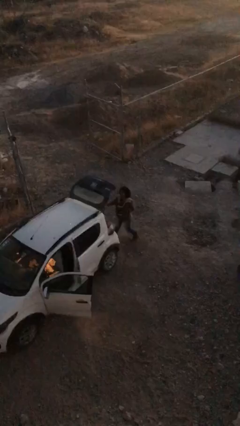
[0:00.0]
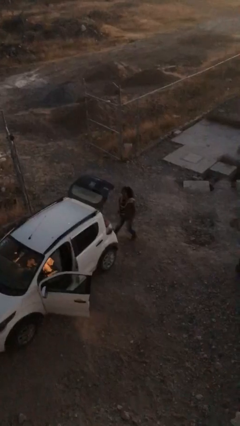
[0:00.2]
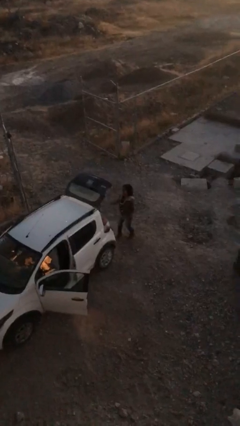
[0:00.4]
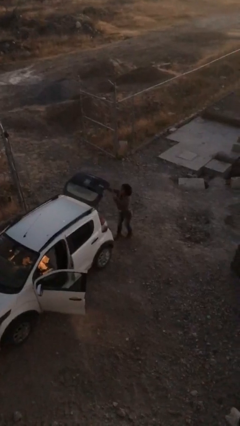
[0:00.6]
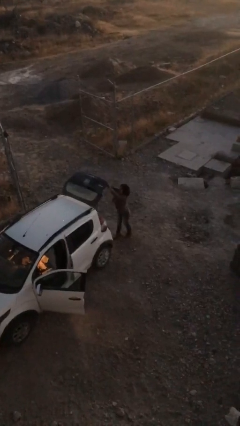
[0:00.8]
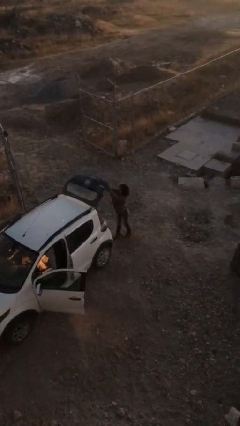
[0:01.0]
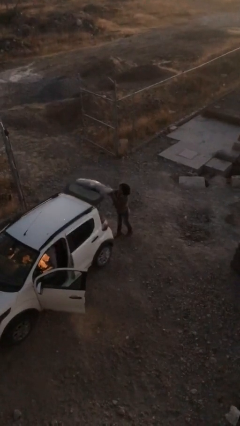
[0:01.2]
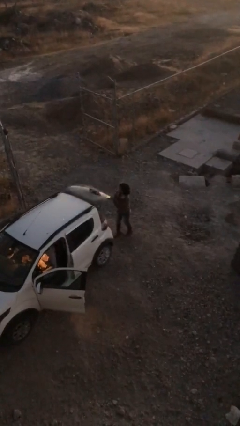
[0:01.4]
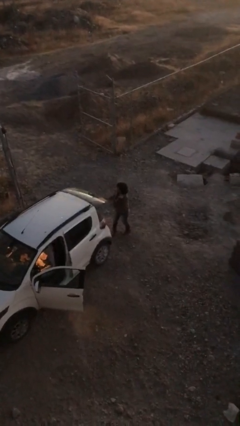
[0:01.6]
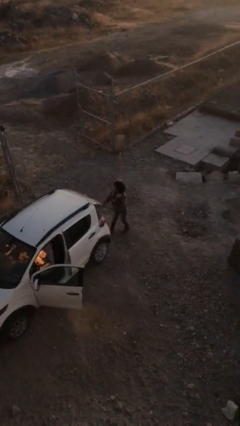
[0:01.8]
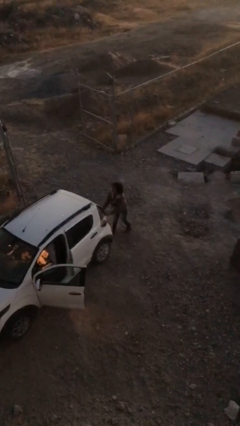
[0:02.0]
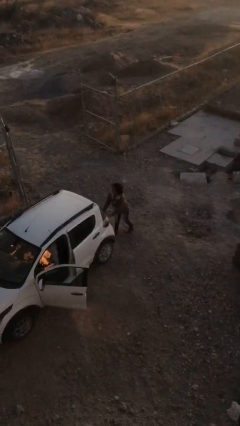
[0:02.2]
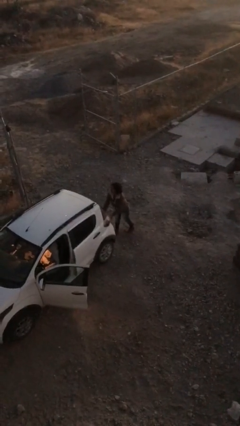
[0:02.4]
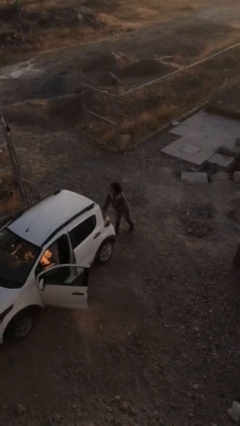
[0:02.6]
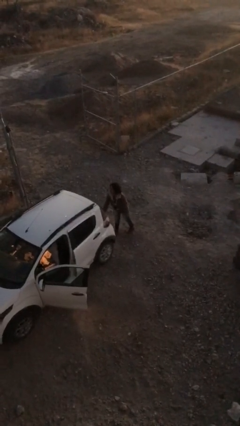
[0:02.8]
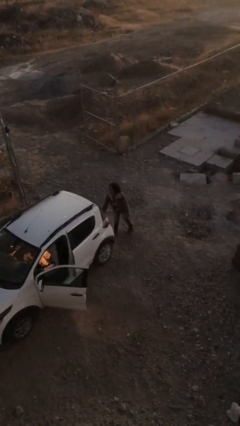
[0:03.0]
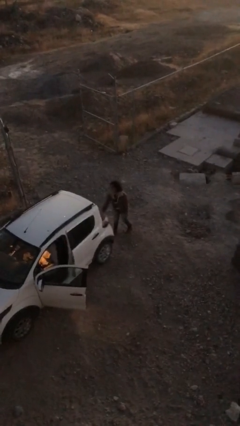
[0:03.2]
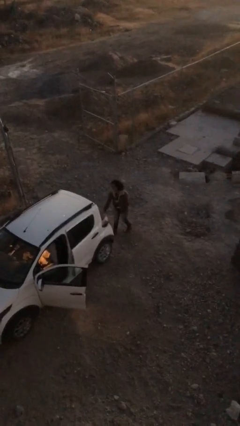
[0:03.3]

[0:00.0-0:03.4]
person closes car trunk

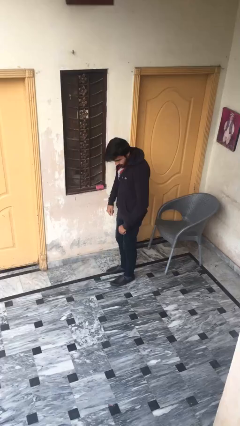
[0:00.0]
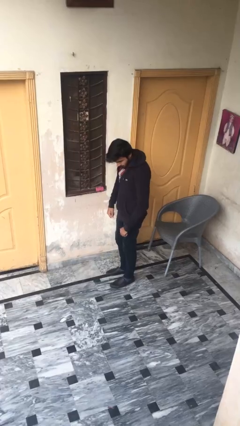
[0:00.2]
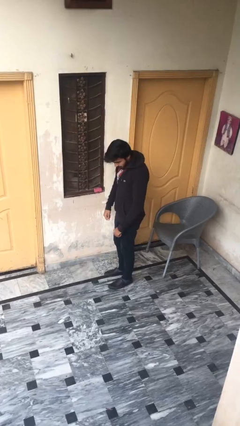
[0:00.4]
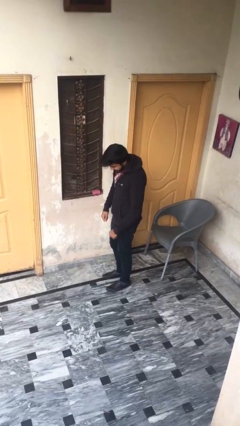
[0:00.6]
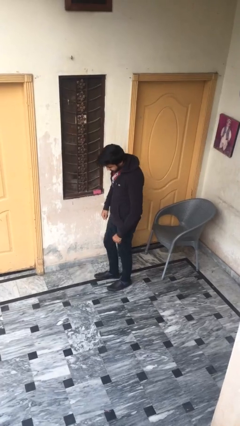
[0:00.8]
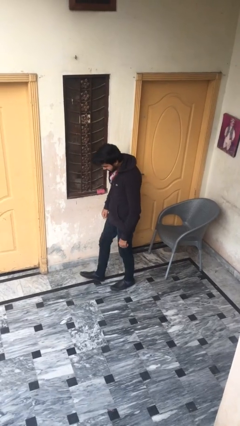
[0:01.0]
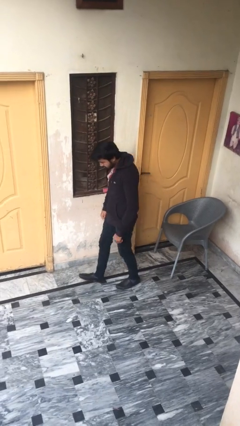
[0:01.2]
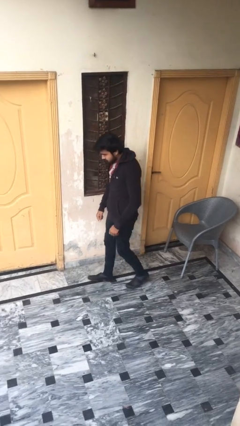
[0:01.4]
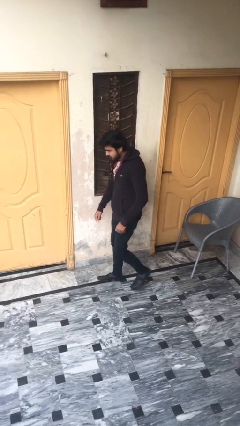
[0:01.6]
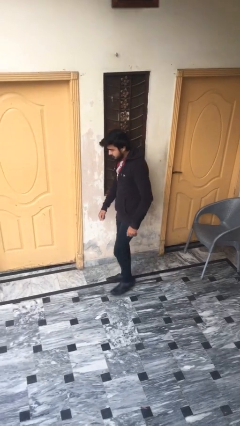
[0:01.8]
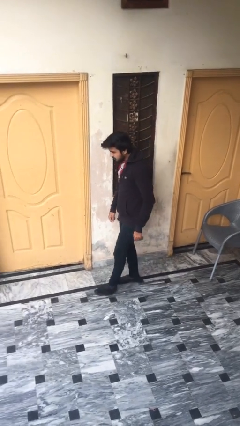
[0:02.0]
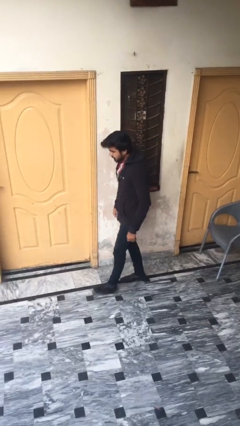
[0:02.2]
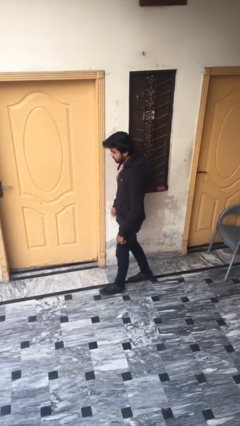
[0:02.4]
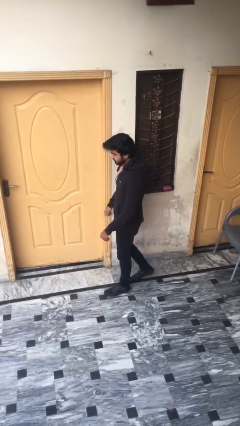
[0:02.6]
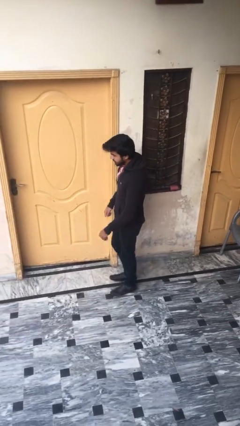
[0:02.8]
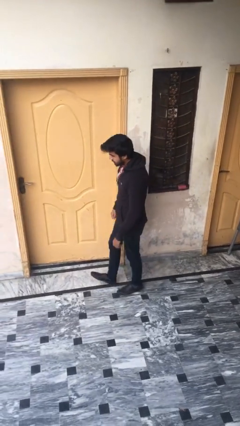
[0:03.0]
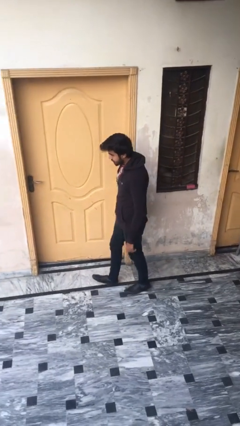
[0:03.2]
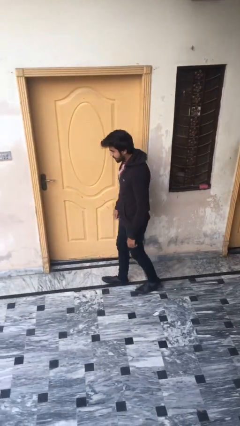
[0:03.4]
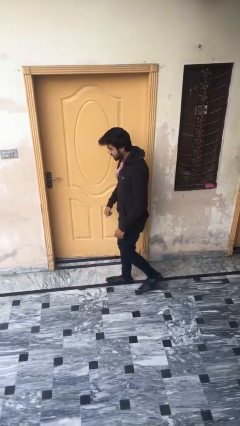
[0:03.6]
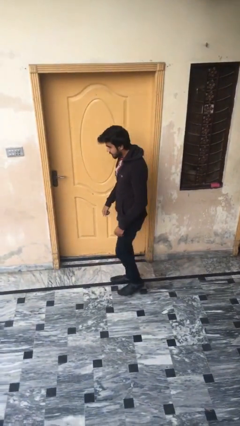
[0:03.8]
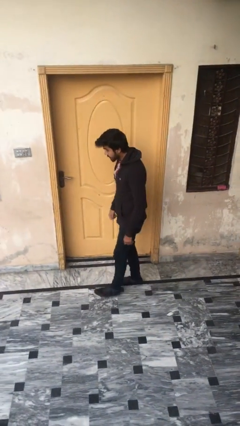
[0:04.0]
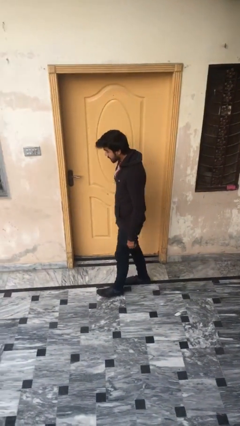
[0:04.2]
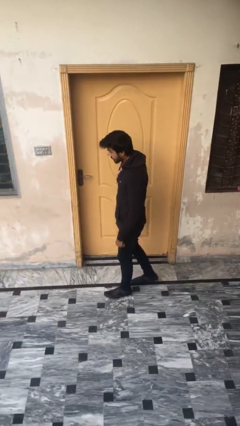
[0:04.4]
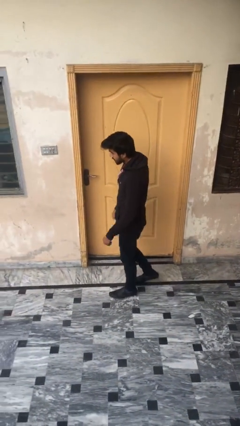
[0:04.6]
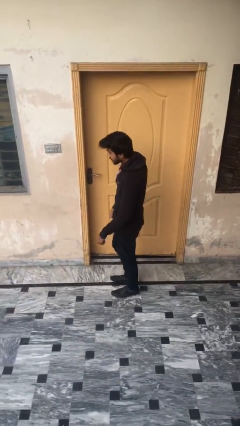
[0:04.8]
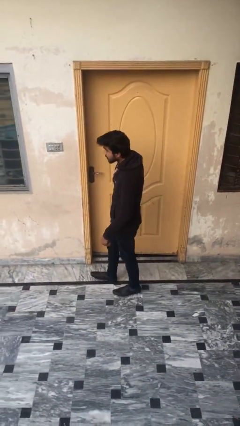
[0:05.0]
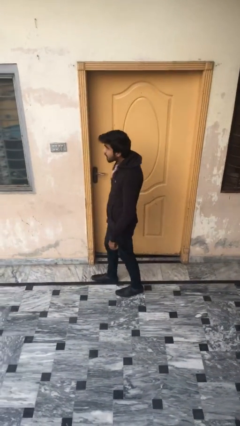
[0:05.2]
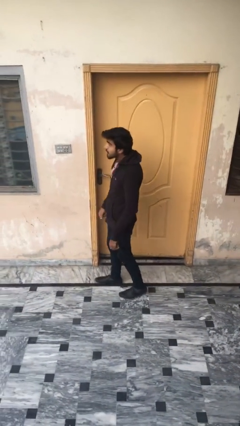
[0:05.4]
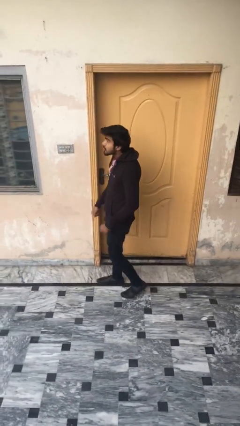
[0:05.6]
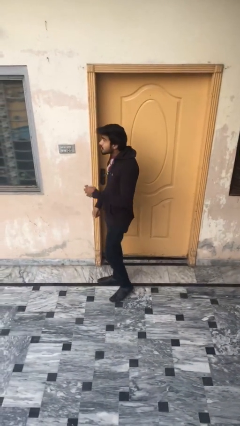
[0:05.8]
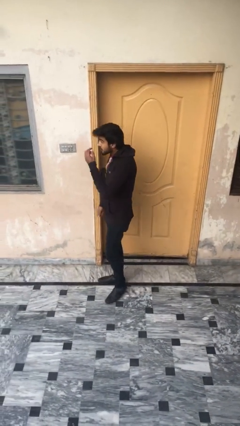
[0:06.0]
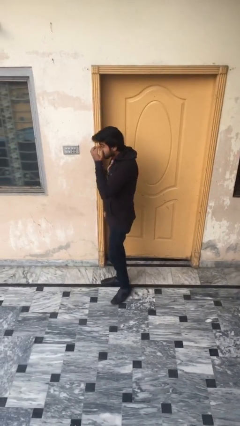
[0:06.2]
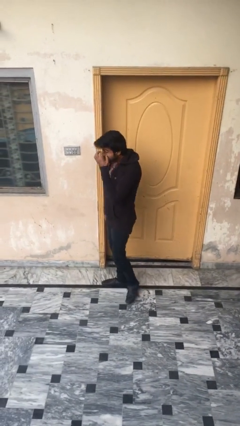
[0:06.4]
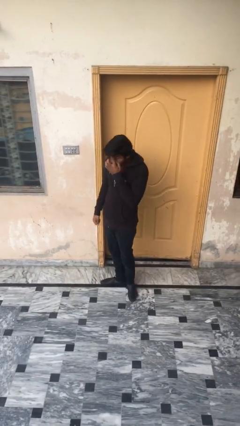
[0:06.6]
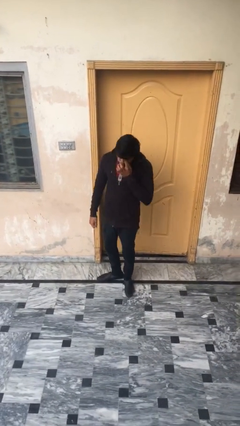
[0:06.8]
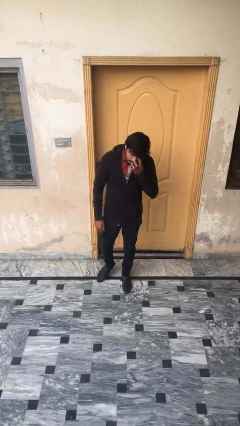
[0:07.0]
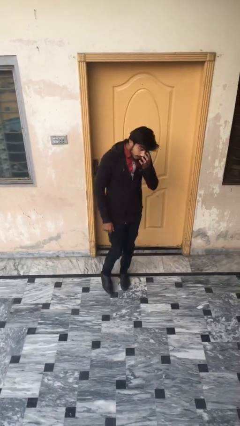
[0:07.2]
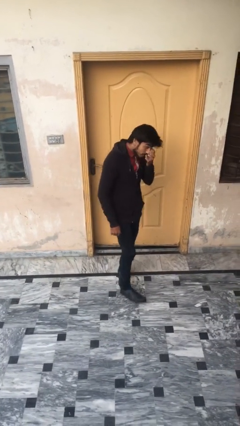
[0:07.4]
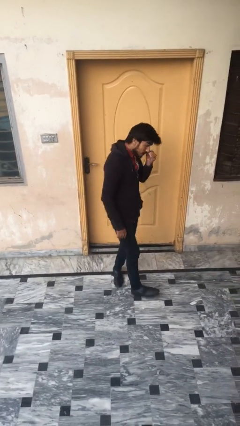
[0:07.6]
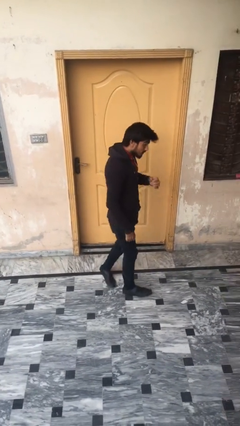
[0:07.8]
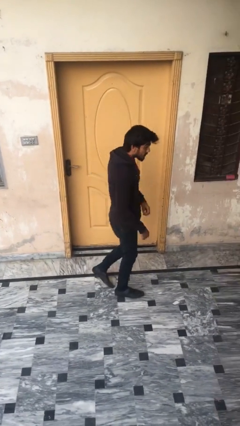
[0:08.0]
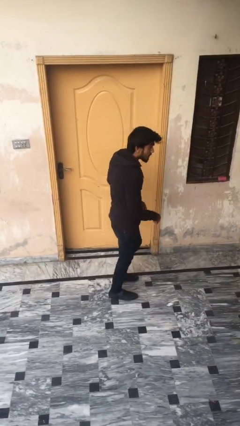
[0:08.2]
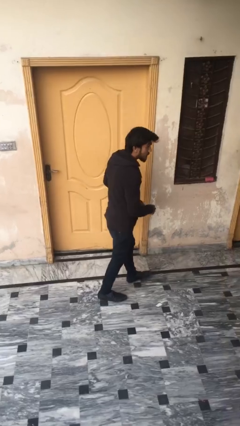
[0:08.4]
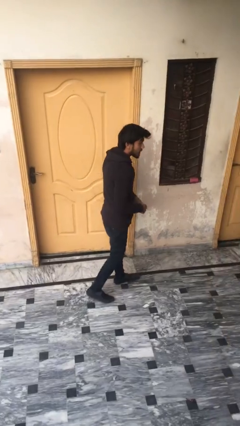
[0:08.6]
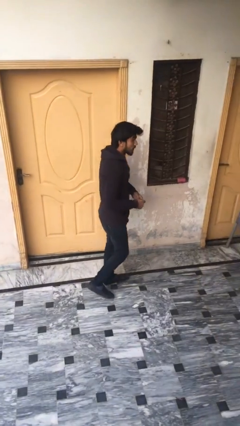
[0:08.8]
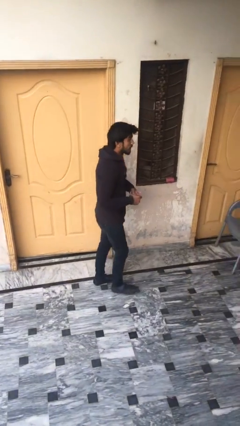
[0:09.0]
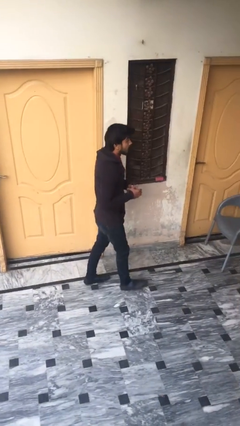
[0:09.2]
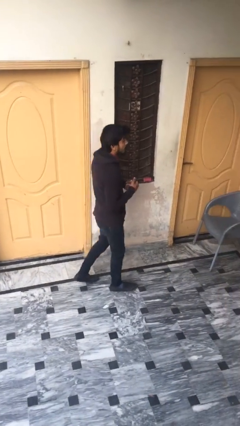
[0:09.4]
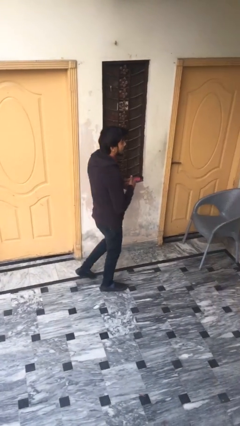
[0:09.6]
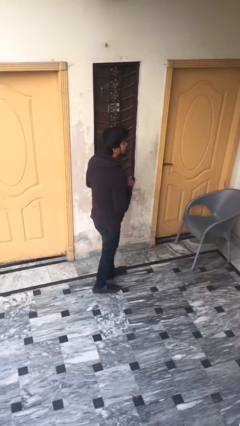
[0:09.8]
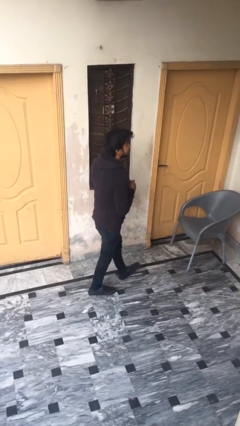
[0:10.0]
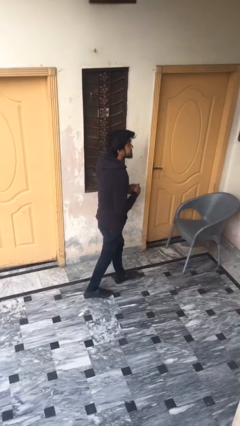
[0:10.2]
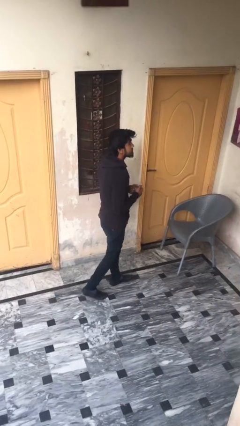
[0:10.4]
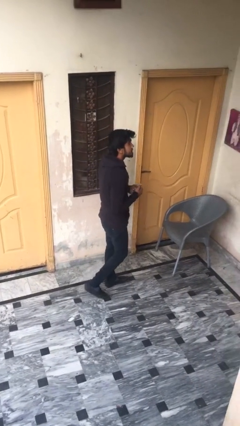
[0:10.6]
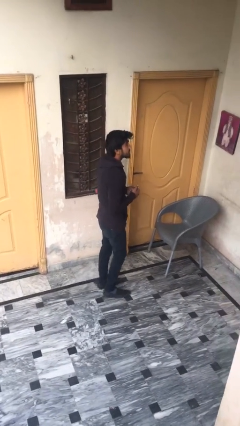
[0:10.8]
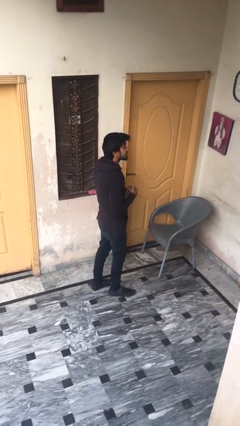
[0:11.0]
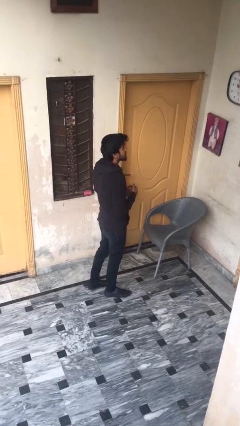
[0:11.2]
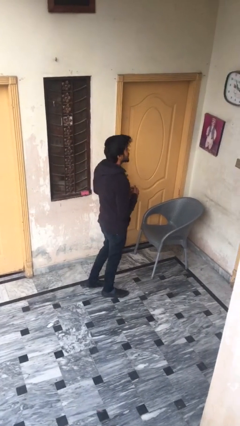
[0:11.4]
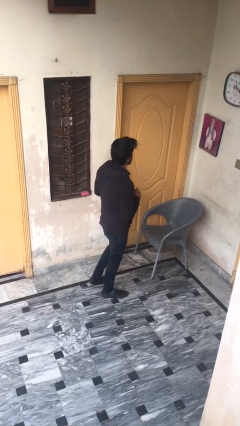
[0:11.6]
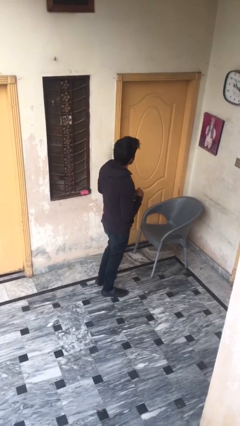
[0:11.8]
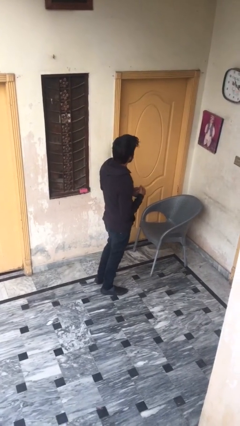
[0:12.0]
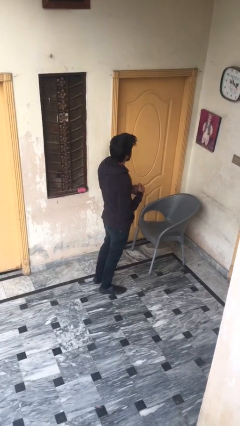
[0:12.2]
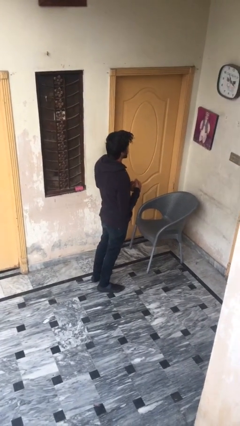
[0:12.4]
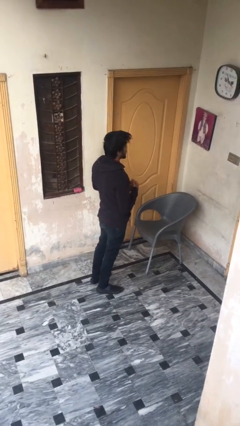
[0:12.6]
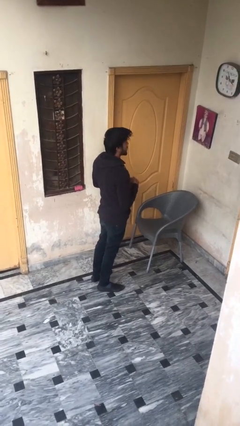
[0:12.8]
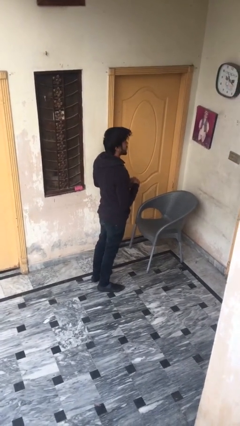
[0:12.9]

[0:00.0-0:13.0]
person walks

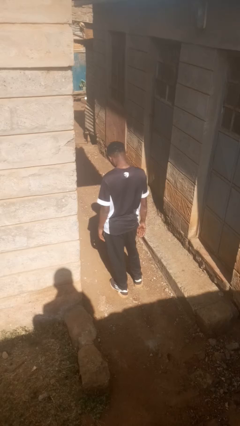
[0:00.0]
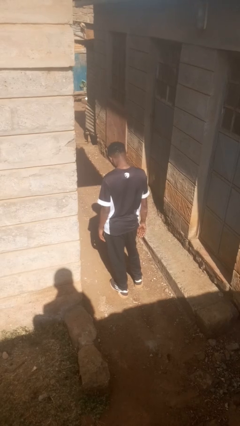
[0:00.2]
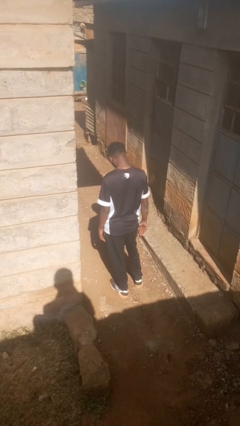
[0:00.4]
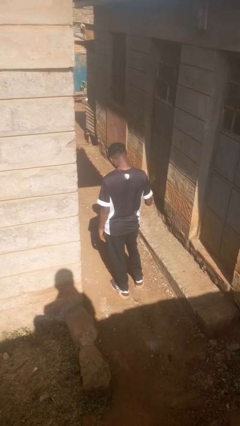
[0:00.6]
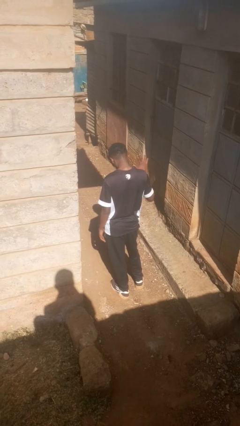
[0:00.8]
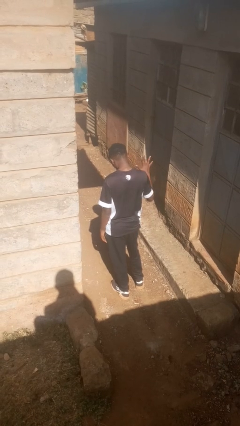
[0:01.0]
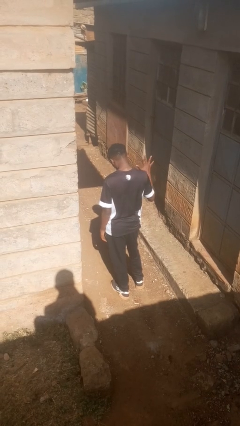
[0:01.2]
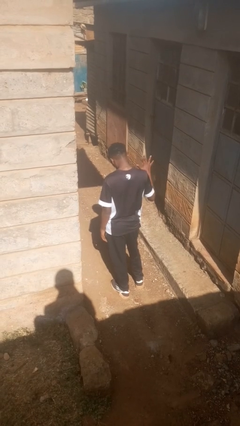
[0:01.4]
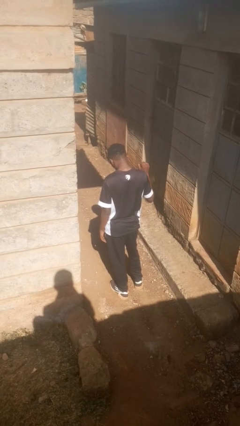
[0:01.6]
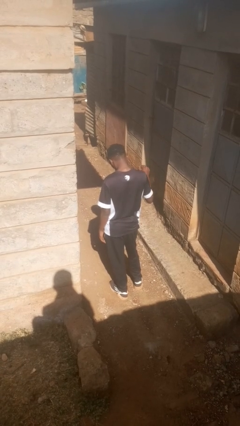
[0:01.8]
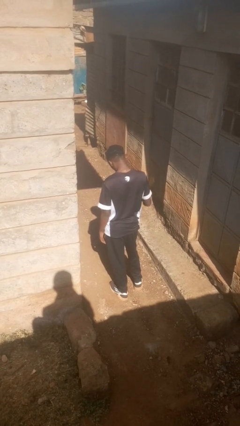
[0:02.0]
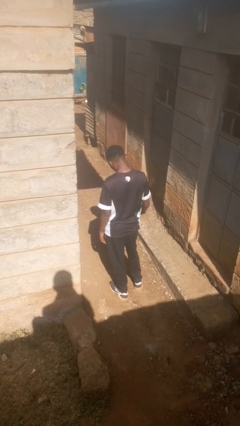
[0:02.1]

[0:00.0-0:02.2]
person gestures number five
